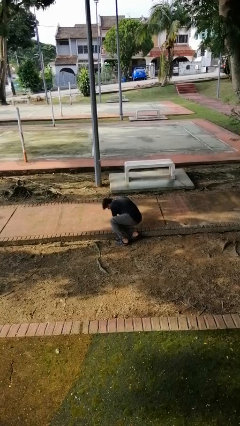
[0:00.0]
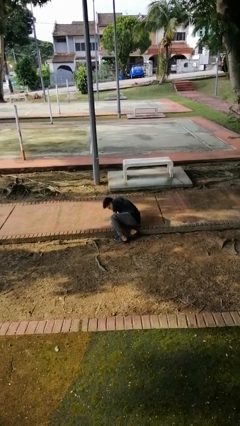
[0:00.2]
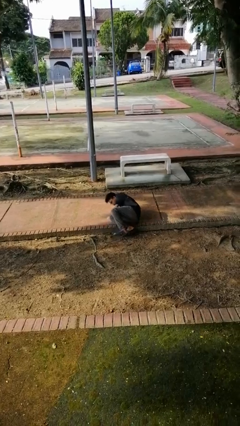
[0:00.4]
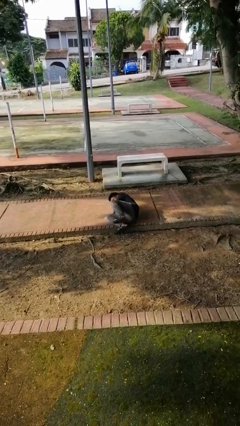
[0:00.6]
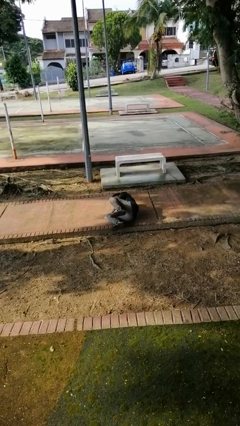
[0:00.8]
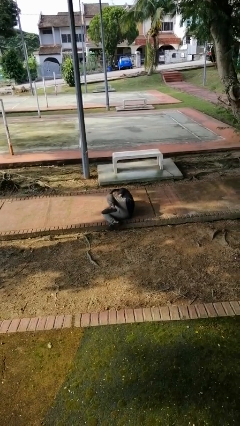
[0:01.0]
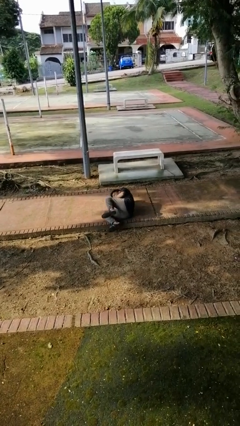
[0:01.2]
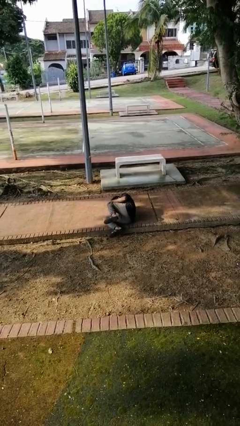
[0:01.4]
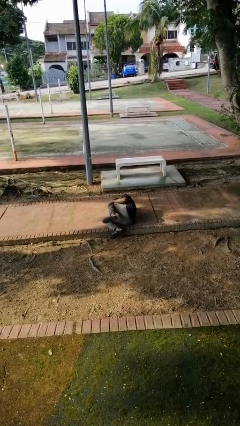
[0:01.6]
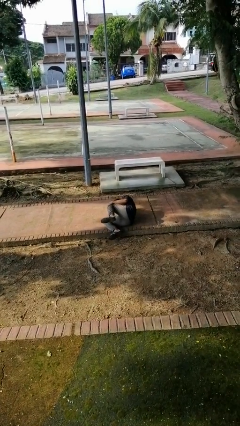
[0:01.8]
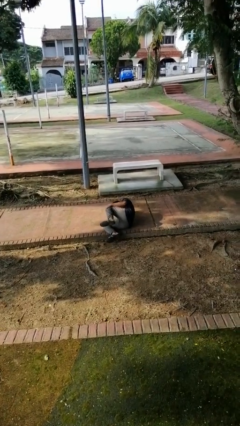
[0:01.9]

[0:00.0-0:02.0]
person lies down on floor

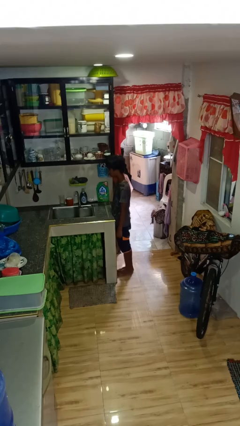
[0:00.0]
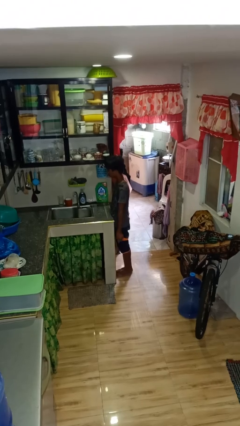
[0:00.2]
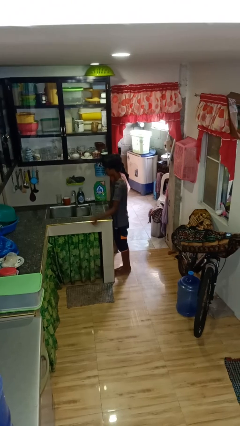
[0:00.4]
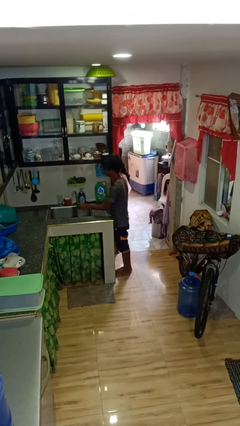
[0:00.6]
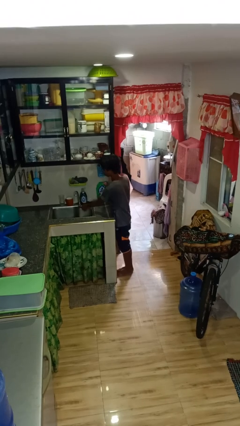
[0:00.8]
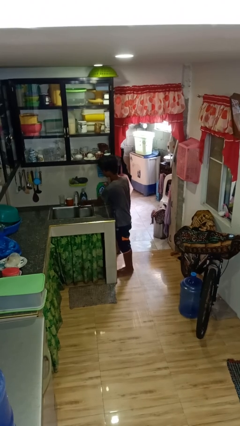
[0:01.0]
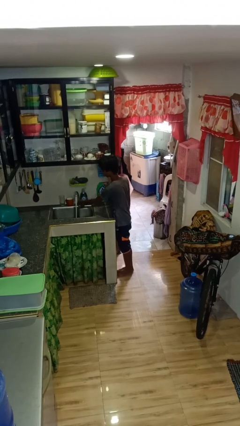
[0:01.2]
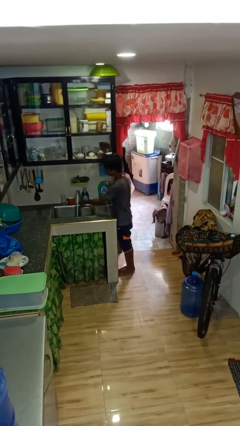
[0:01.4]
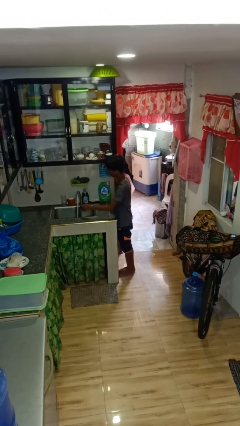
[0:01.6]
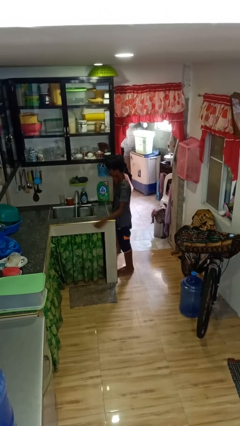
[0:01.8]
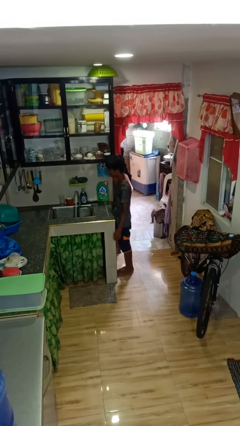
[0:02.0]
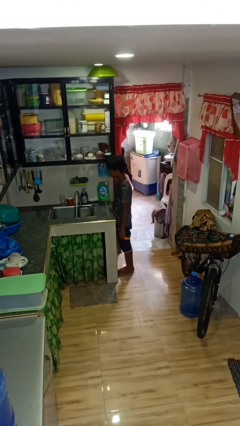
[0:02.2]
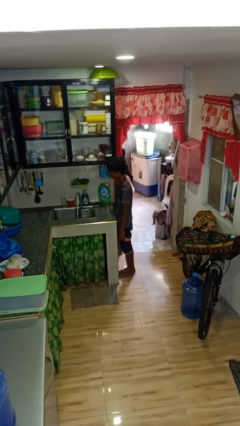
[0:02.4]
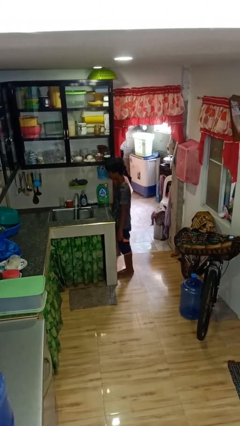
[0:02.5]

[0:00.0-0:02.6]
person turns on faucet

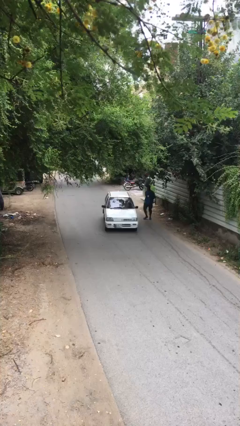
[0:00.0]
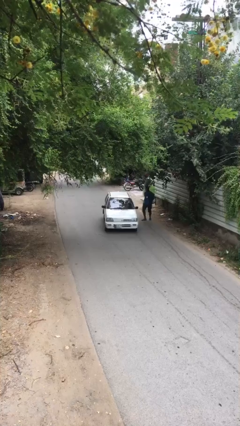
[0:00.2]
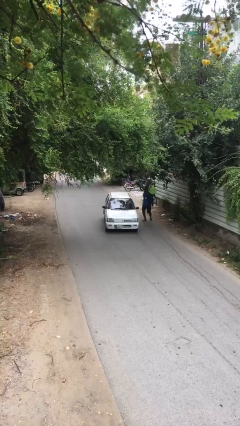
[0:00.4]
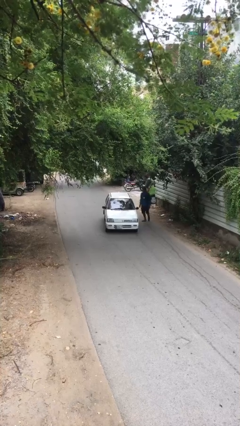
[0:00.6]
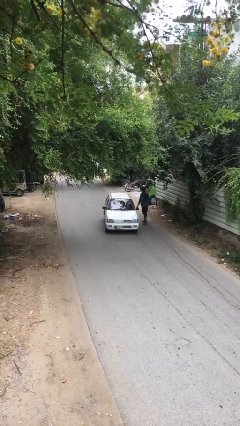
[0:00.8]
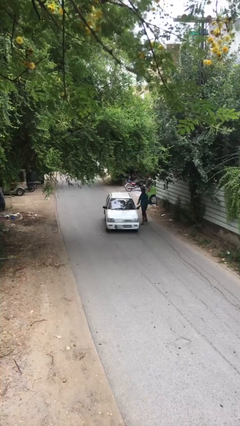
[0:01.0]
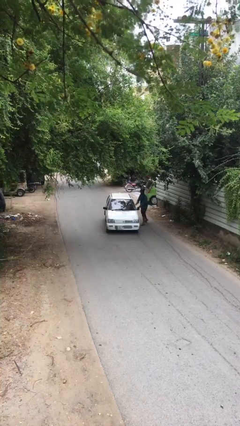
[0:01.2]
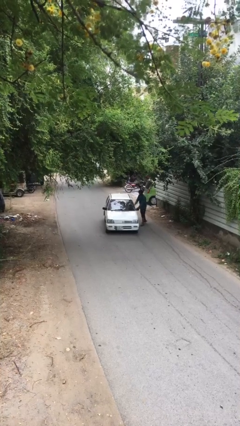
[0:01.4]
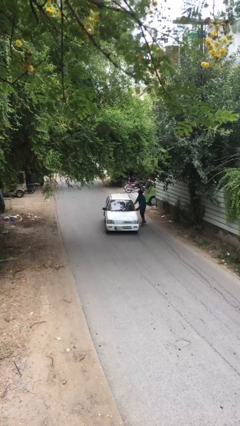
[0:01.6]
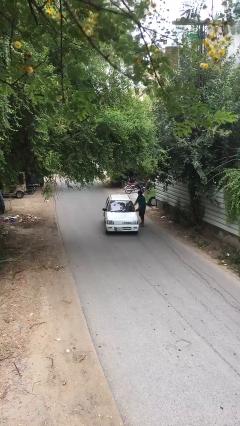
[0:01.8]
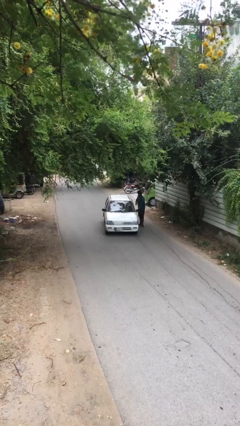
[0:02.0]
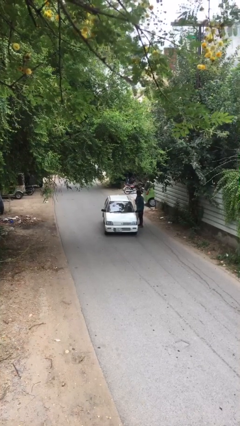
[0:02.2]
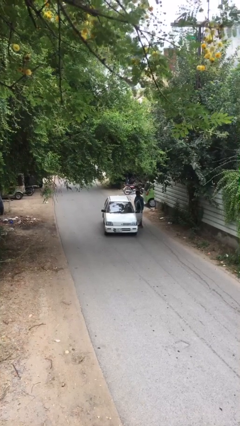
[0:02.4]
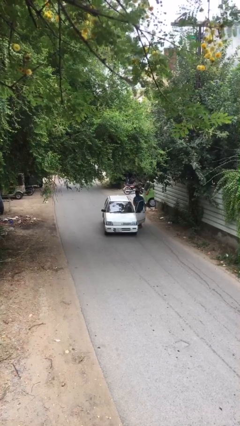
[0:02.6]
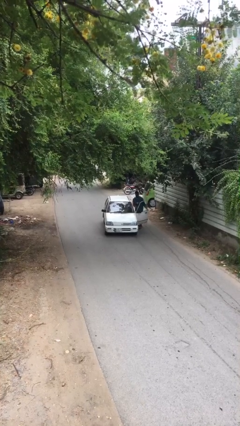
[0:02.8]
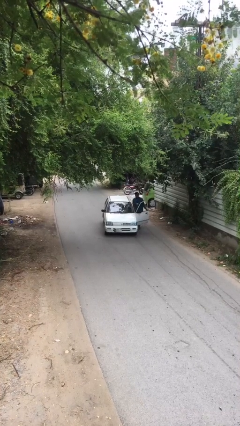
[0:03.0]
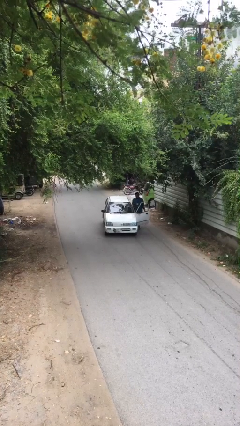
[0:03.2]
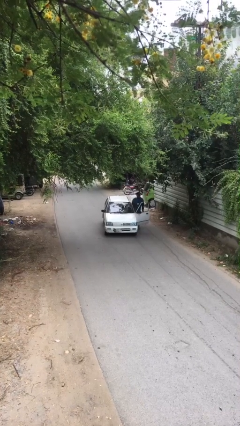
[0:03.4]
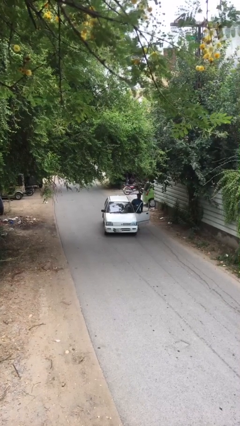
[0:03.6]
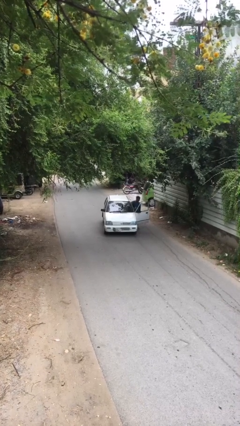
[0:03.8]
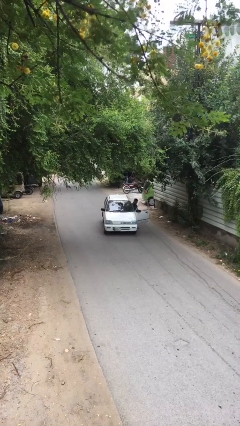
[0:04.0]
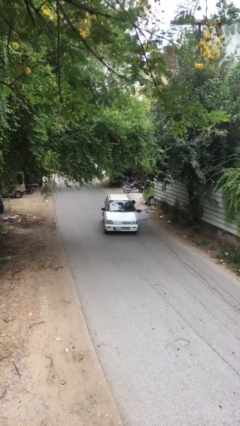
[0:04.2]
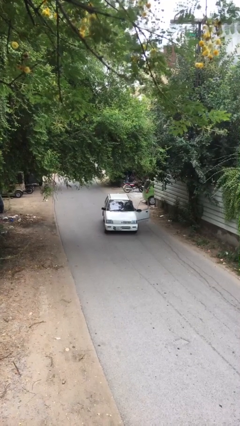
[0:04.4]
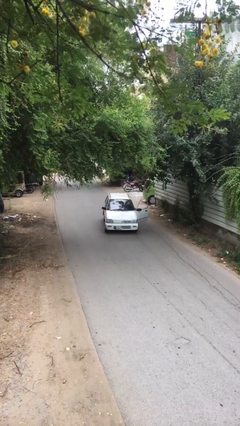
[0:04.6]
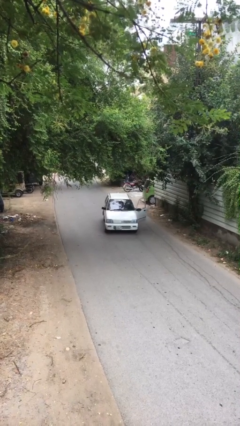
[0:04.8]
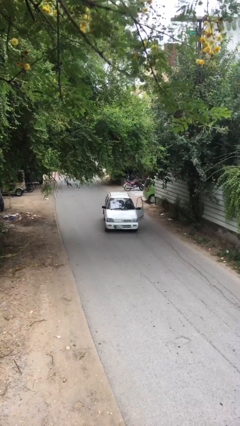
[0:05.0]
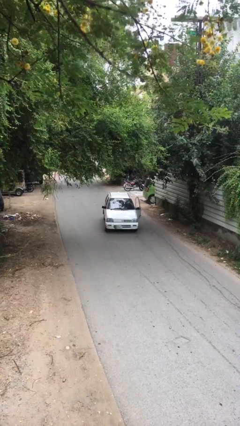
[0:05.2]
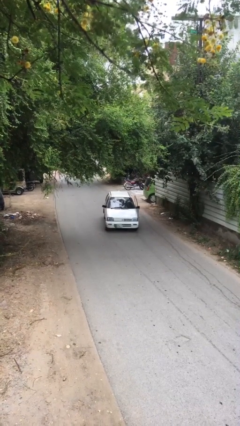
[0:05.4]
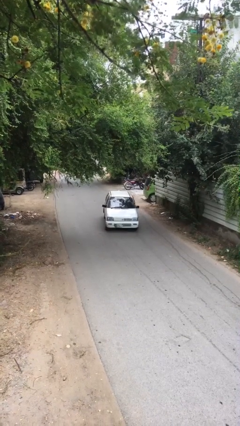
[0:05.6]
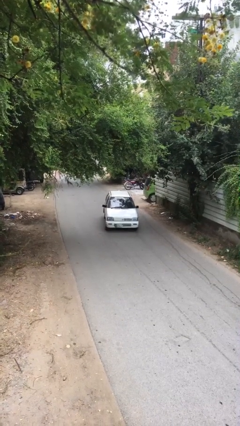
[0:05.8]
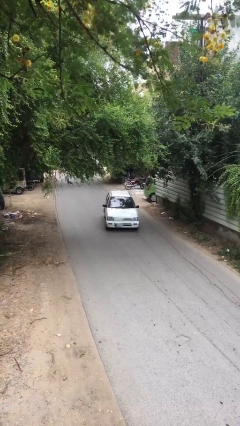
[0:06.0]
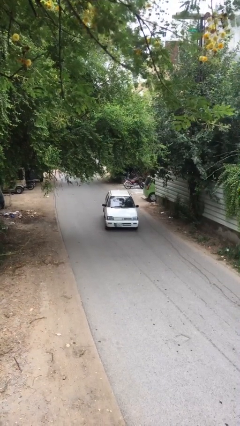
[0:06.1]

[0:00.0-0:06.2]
car picks up person

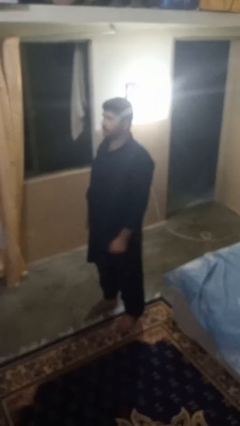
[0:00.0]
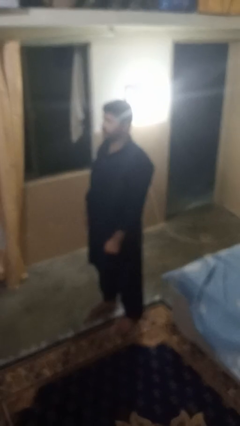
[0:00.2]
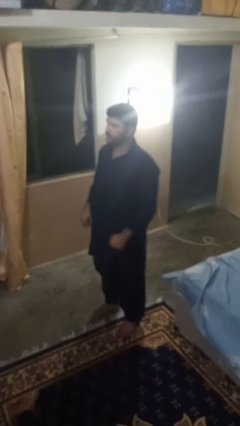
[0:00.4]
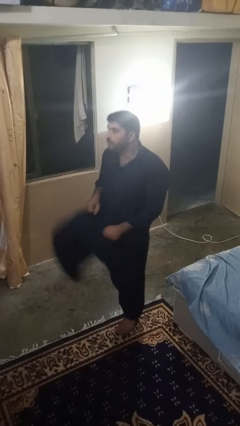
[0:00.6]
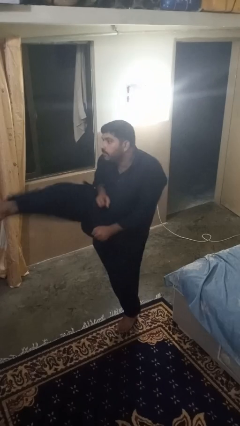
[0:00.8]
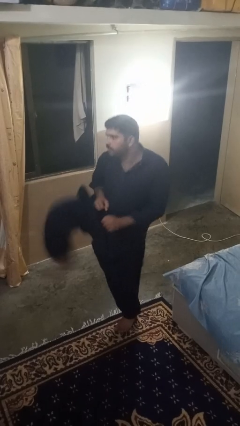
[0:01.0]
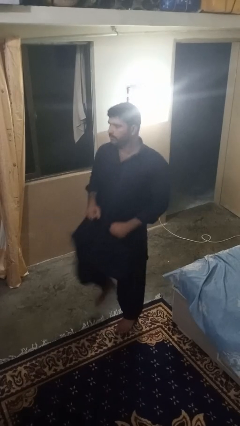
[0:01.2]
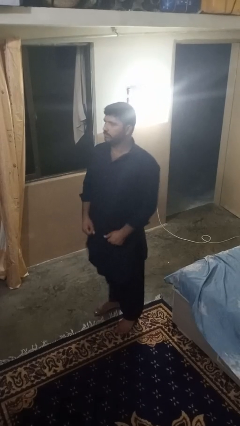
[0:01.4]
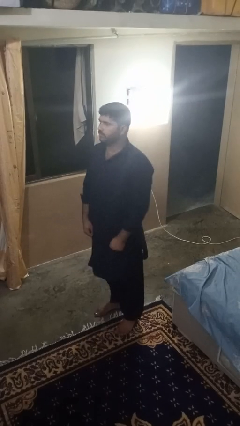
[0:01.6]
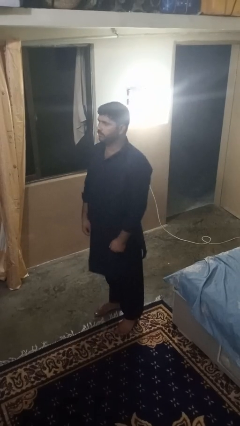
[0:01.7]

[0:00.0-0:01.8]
person karate kicks

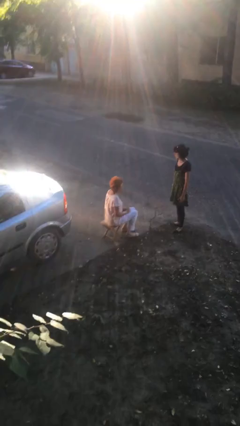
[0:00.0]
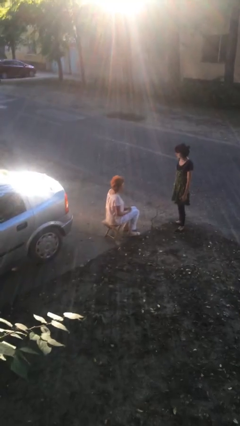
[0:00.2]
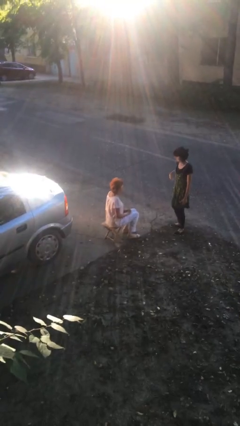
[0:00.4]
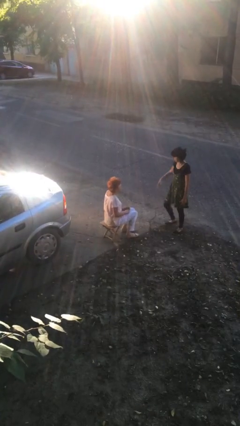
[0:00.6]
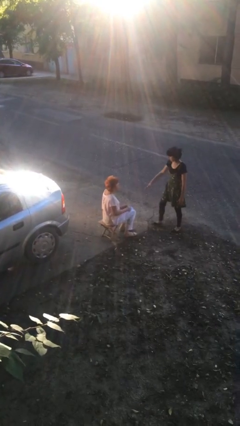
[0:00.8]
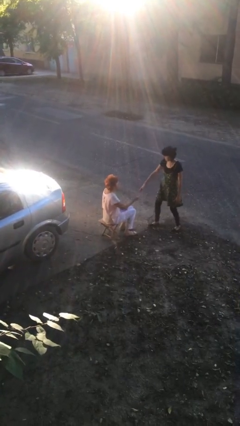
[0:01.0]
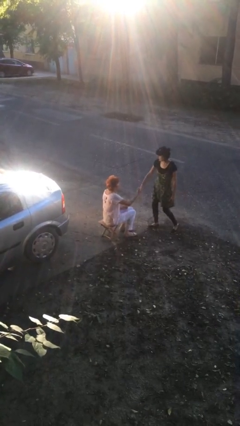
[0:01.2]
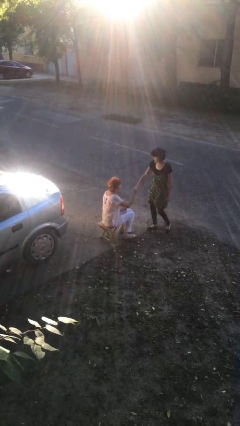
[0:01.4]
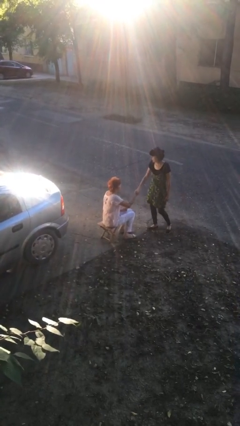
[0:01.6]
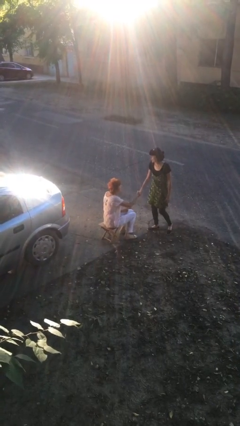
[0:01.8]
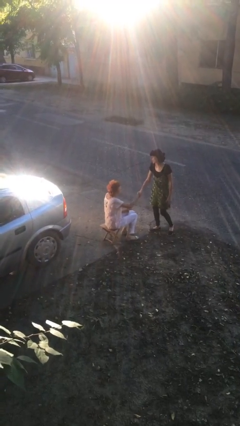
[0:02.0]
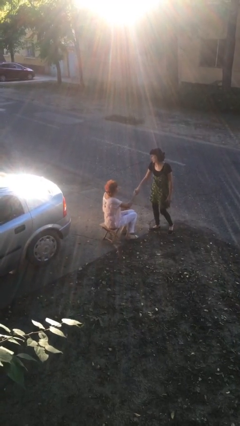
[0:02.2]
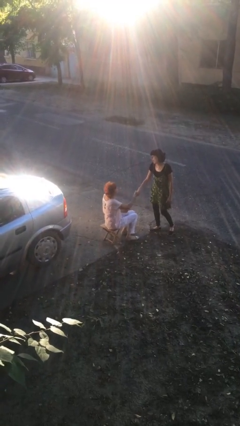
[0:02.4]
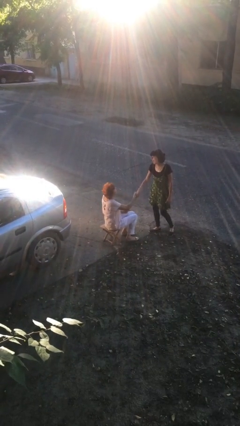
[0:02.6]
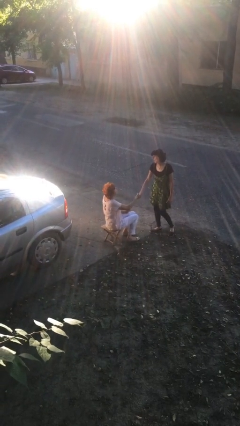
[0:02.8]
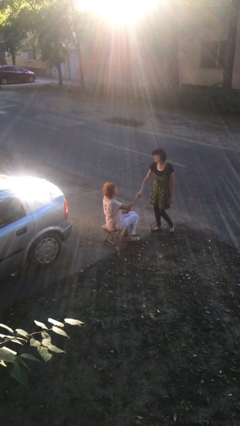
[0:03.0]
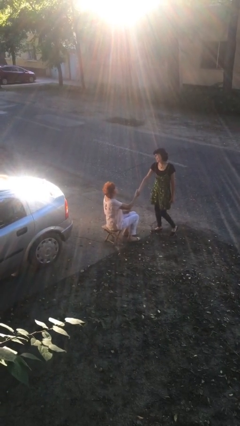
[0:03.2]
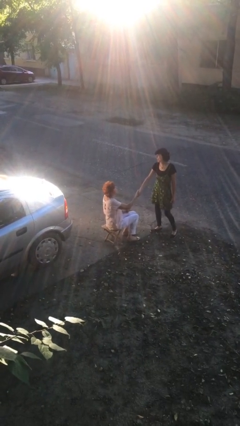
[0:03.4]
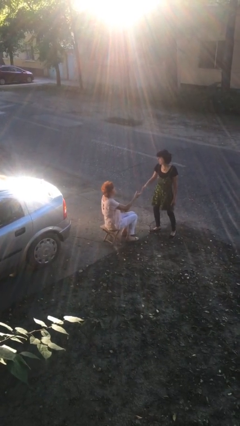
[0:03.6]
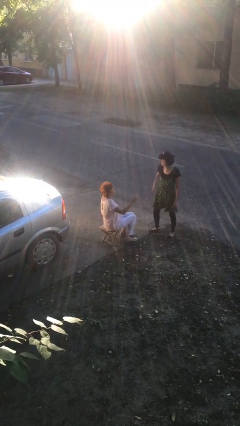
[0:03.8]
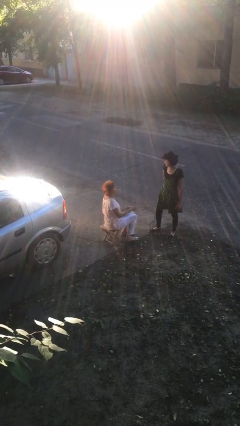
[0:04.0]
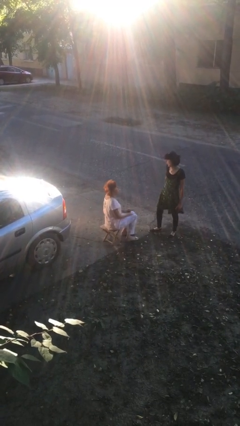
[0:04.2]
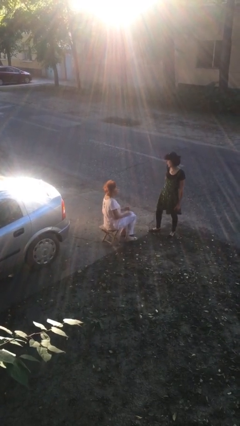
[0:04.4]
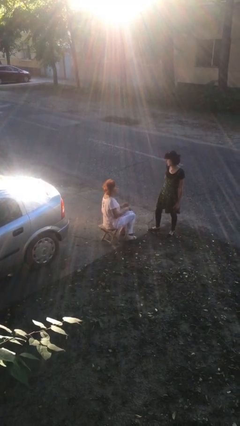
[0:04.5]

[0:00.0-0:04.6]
person shakes hand

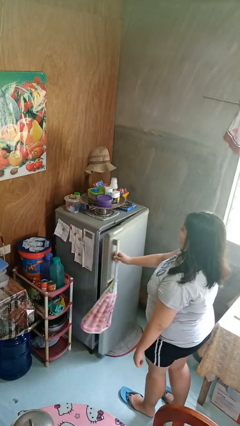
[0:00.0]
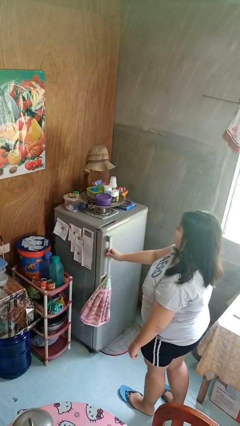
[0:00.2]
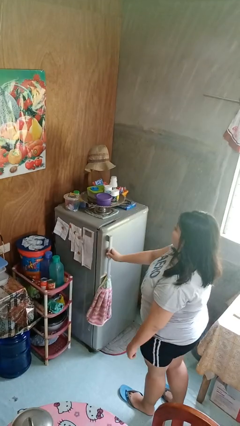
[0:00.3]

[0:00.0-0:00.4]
person closes refrigerator

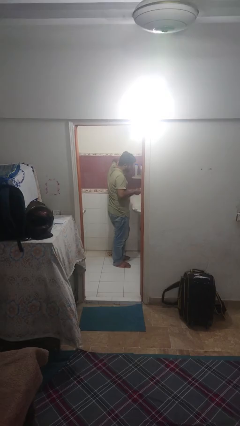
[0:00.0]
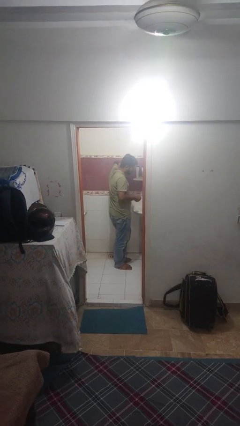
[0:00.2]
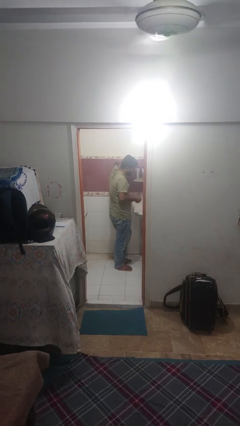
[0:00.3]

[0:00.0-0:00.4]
person brushes teeth
